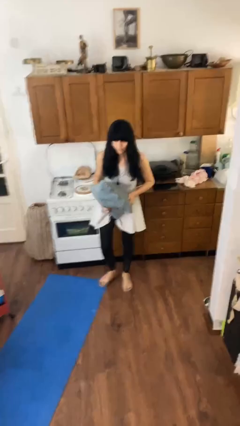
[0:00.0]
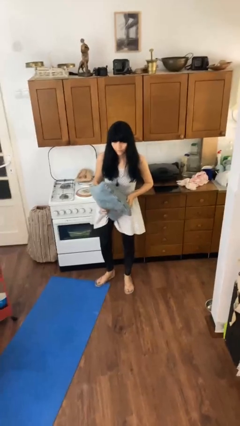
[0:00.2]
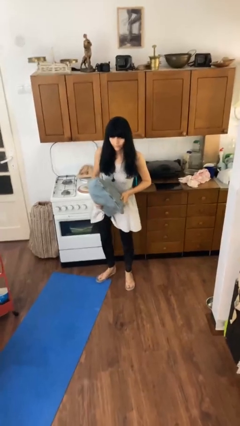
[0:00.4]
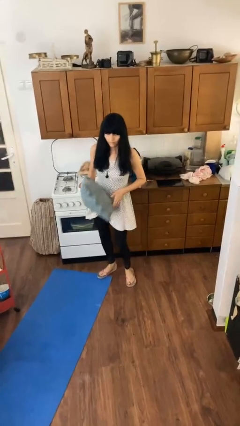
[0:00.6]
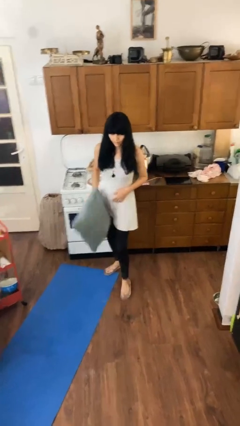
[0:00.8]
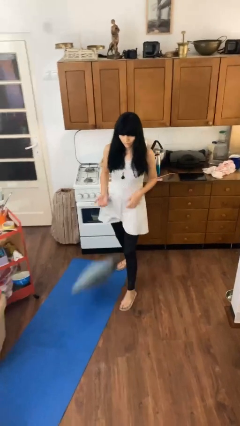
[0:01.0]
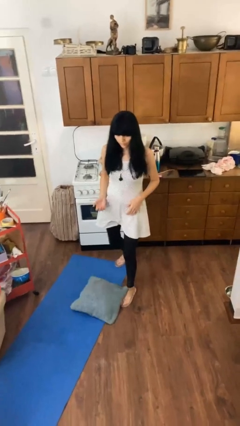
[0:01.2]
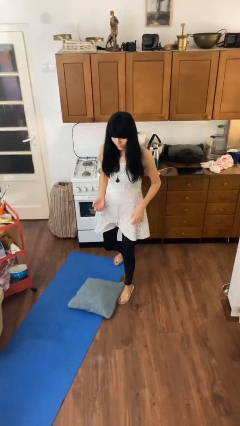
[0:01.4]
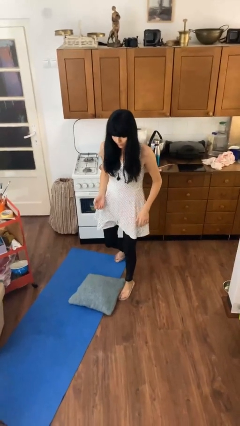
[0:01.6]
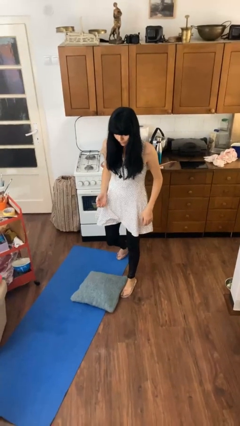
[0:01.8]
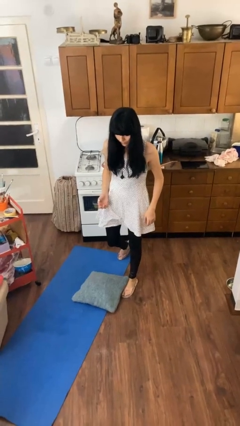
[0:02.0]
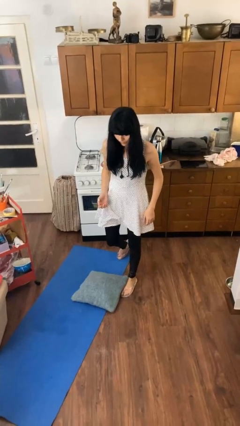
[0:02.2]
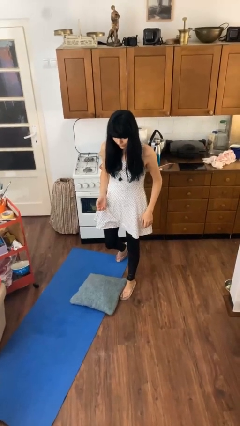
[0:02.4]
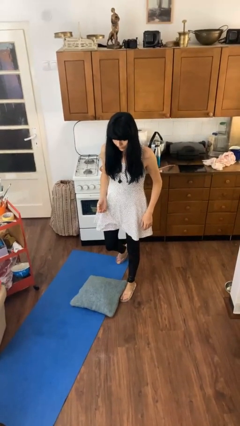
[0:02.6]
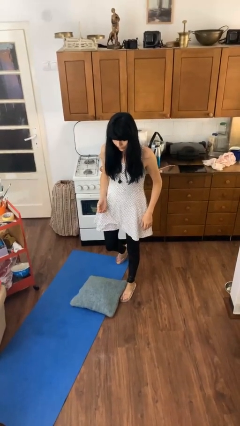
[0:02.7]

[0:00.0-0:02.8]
person drops object

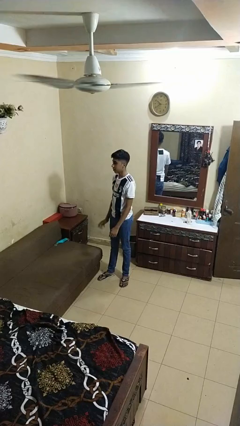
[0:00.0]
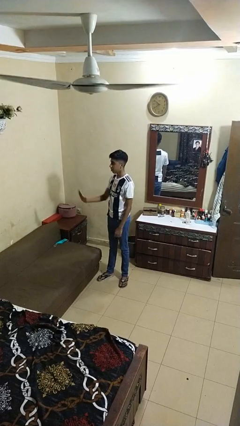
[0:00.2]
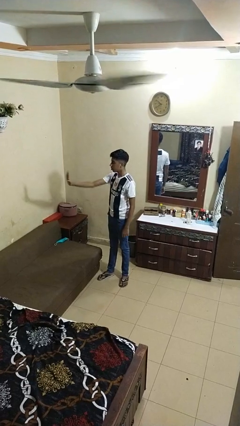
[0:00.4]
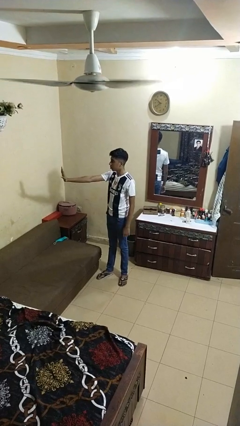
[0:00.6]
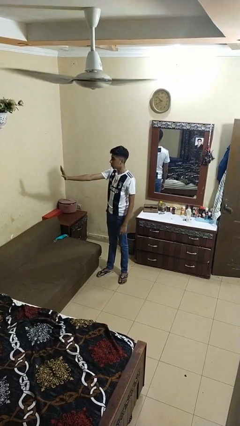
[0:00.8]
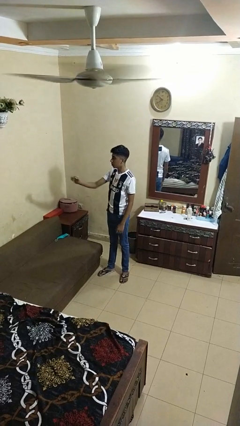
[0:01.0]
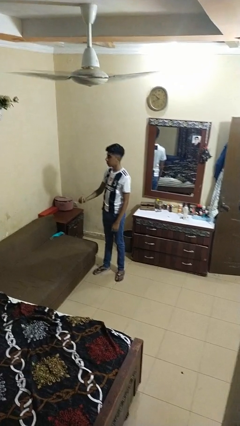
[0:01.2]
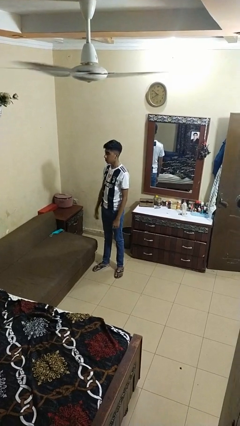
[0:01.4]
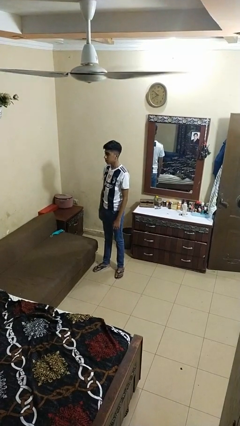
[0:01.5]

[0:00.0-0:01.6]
person gestures stop

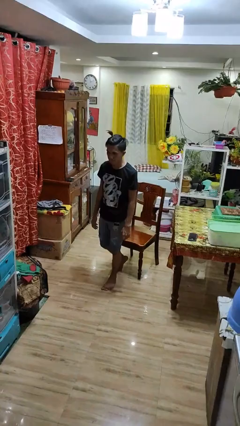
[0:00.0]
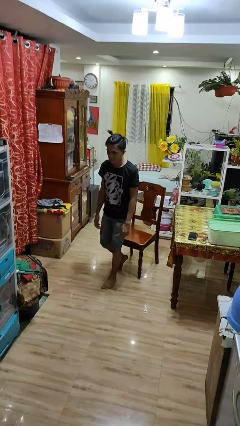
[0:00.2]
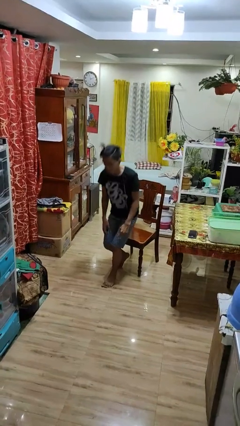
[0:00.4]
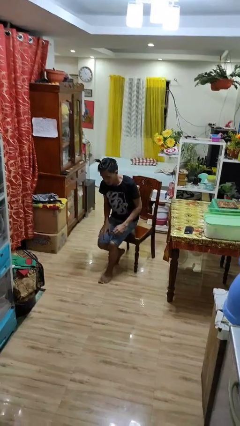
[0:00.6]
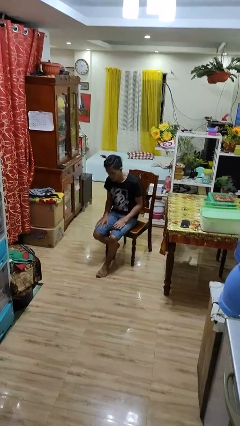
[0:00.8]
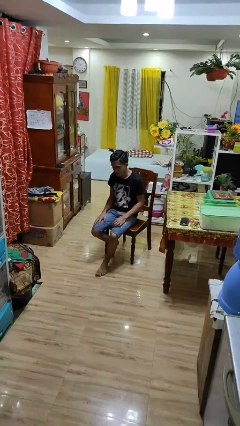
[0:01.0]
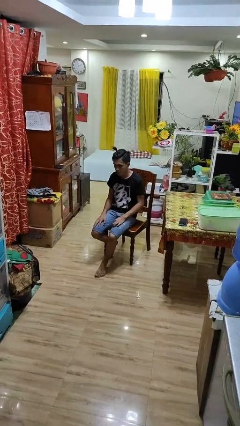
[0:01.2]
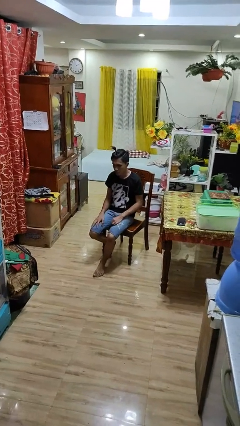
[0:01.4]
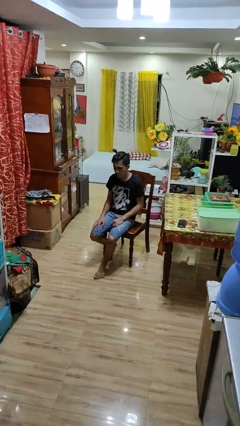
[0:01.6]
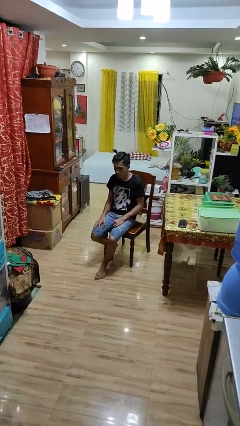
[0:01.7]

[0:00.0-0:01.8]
person sits down

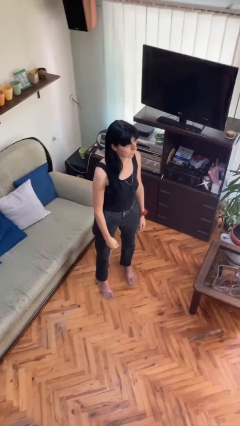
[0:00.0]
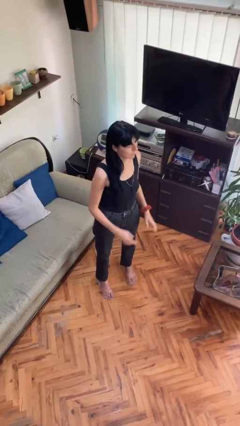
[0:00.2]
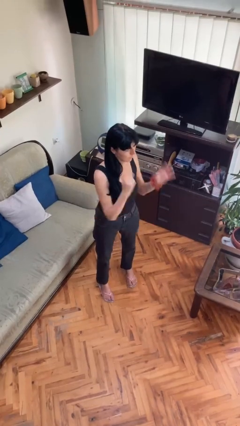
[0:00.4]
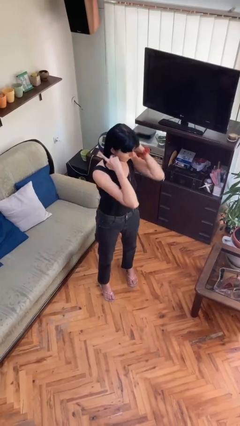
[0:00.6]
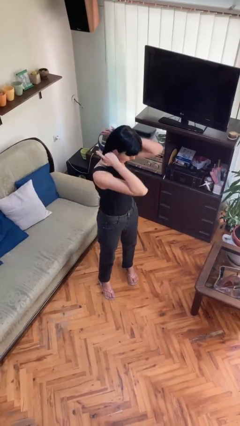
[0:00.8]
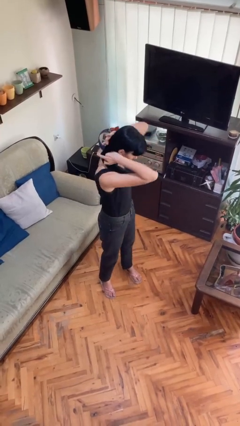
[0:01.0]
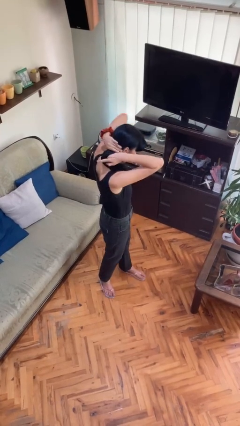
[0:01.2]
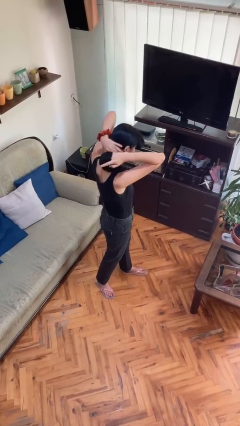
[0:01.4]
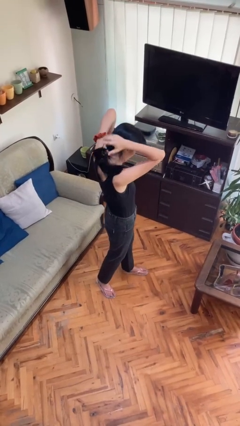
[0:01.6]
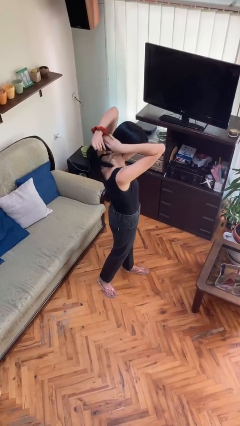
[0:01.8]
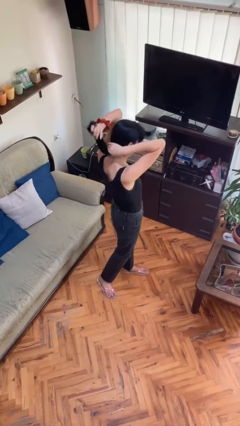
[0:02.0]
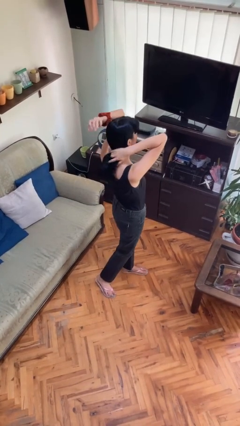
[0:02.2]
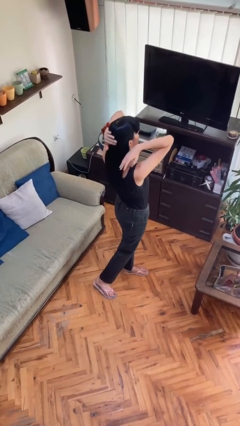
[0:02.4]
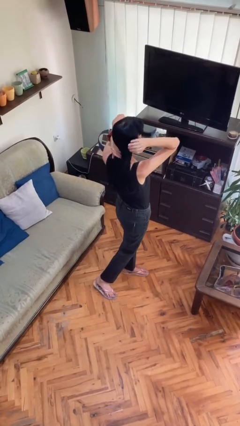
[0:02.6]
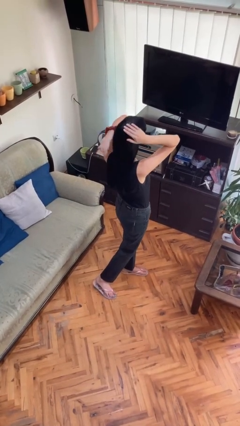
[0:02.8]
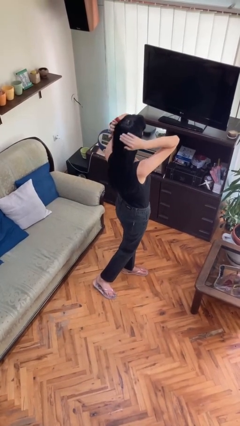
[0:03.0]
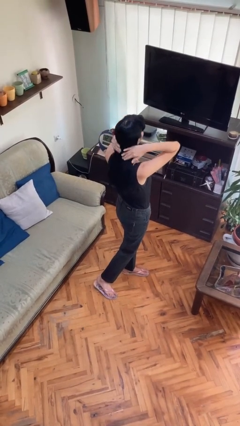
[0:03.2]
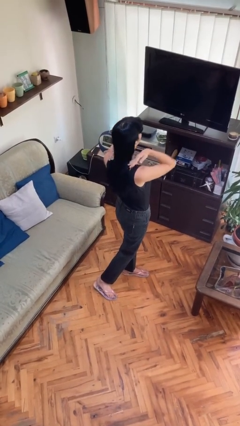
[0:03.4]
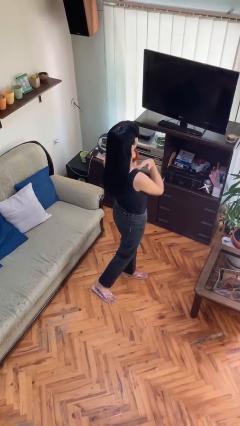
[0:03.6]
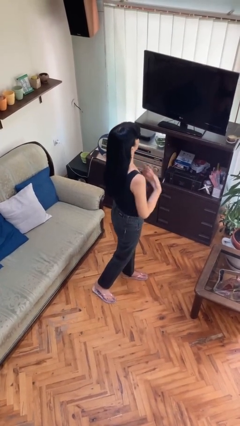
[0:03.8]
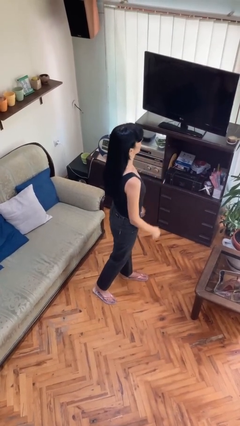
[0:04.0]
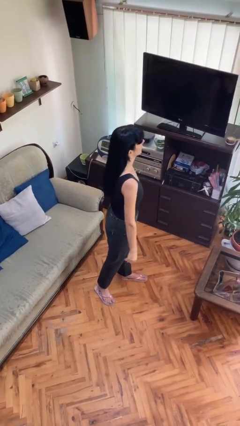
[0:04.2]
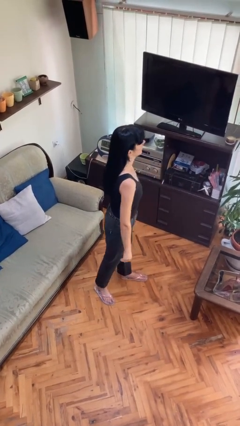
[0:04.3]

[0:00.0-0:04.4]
person strokes hair

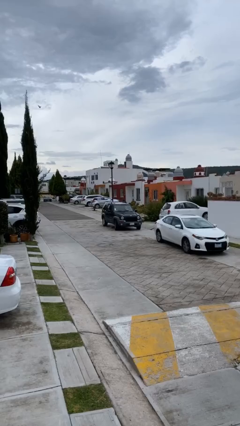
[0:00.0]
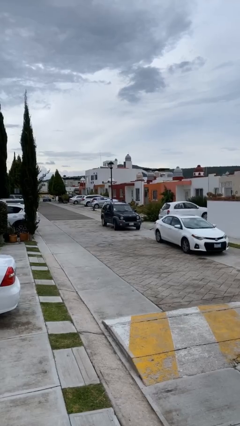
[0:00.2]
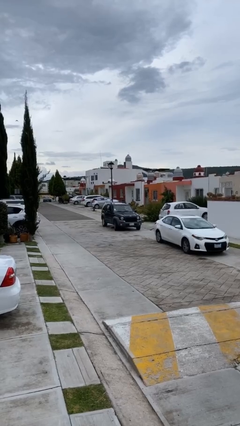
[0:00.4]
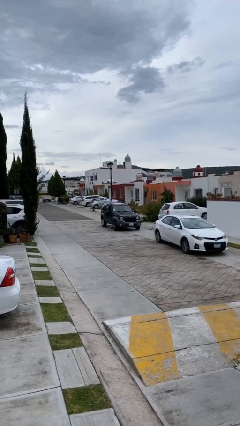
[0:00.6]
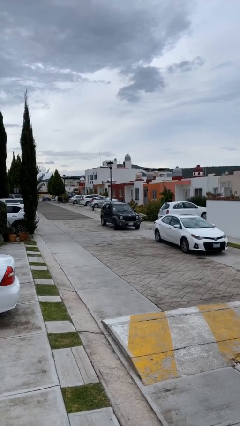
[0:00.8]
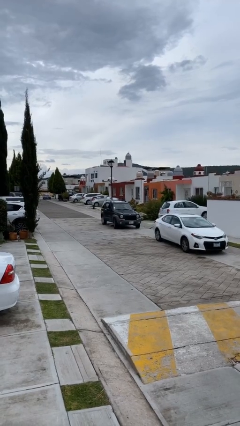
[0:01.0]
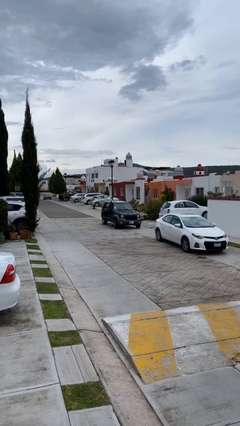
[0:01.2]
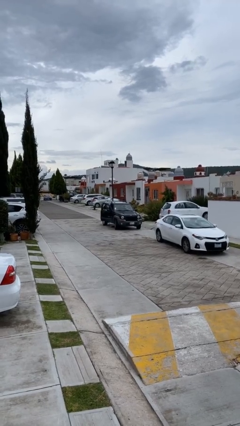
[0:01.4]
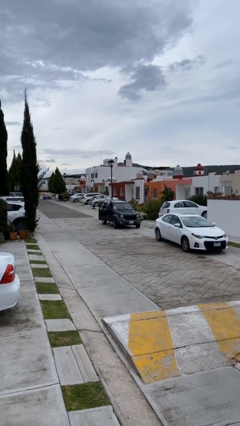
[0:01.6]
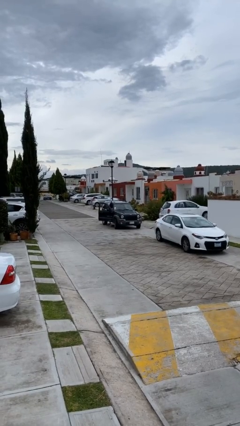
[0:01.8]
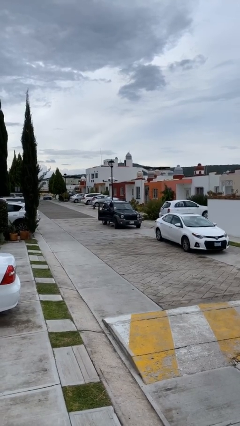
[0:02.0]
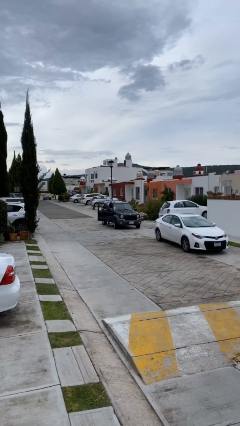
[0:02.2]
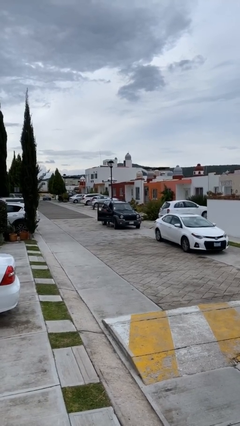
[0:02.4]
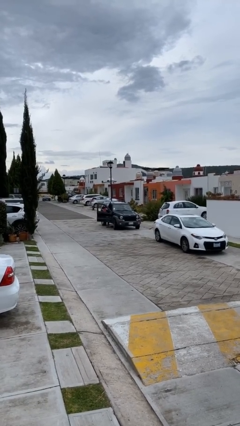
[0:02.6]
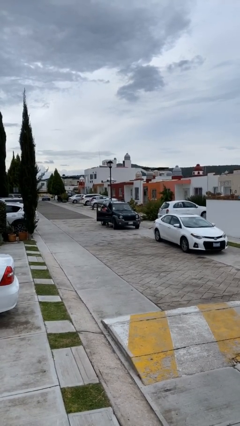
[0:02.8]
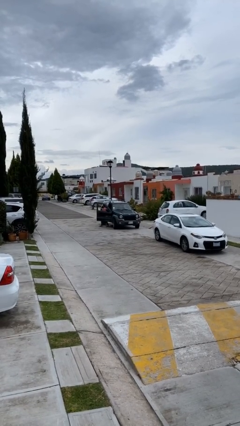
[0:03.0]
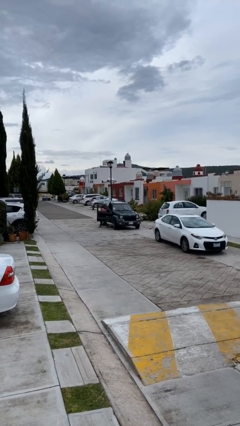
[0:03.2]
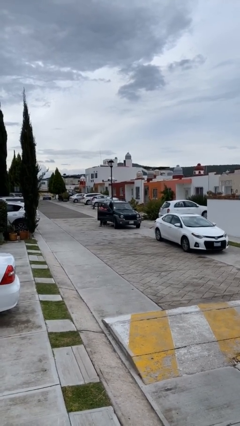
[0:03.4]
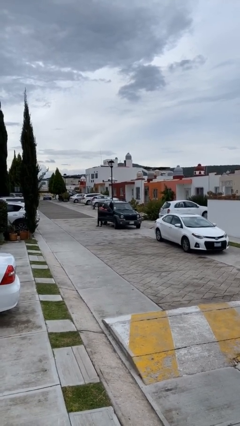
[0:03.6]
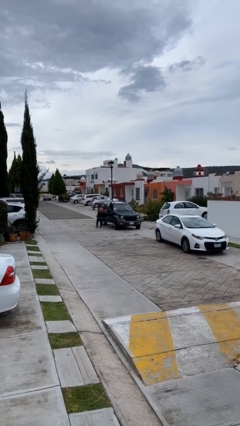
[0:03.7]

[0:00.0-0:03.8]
car drops off person

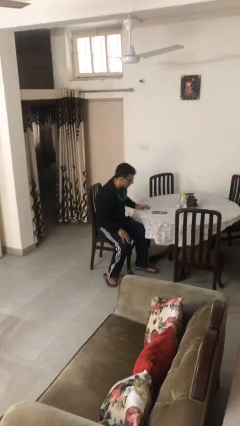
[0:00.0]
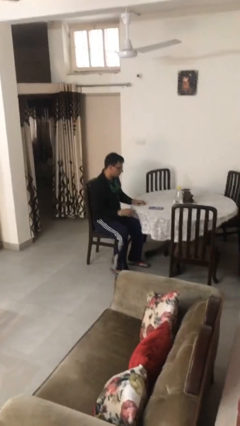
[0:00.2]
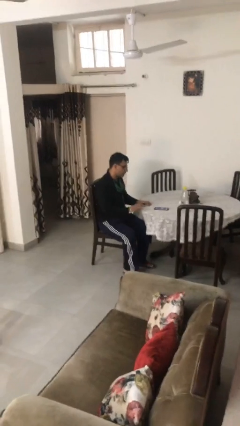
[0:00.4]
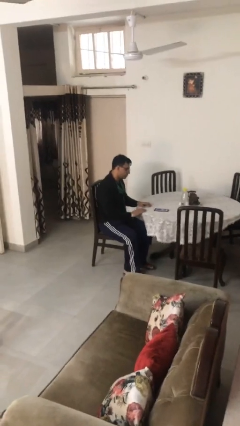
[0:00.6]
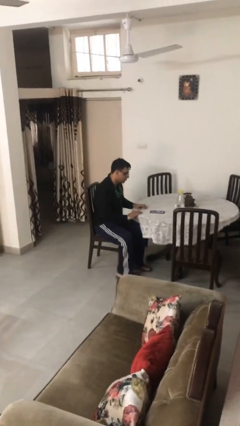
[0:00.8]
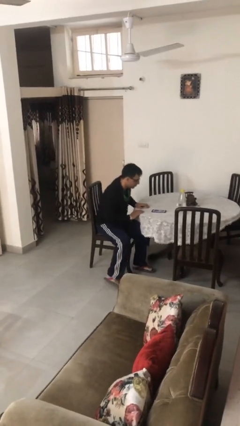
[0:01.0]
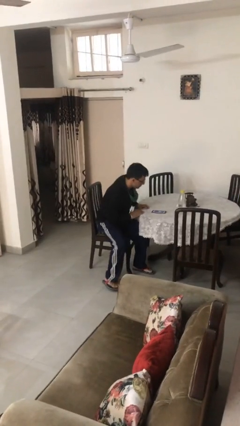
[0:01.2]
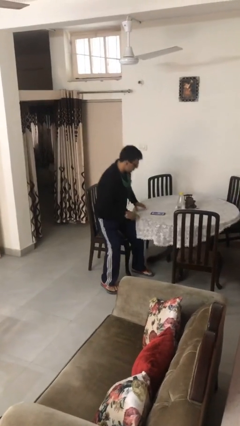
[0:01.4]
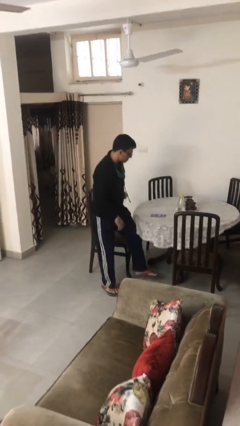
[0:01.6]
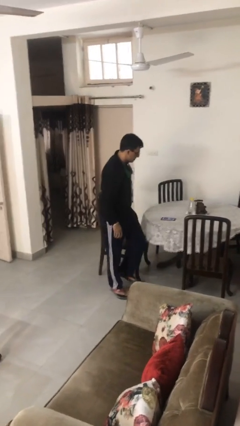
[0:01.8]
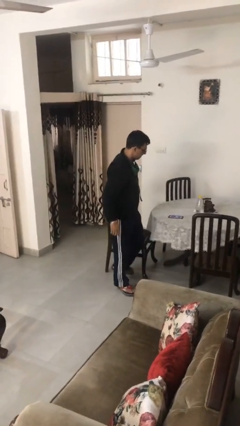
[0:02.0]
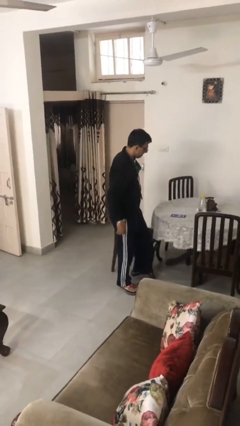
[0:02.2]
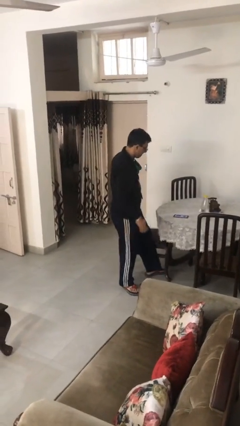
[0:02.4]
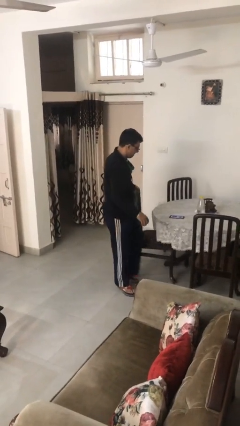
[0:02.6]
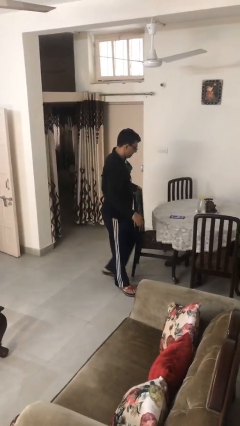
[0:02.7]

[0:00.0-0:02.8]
person stands up
